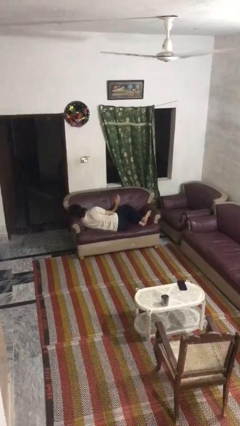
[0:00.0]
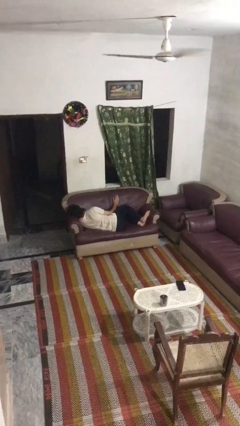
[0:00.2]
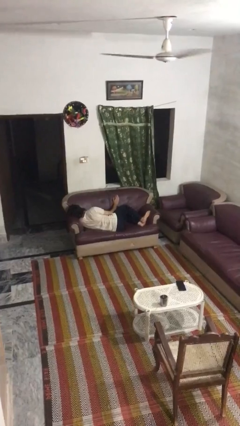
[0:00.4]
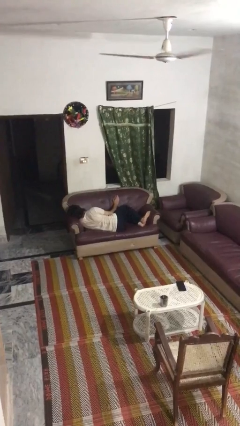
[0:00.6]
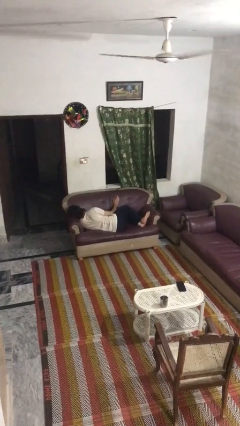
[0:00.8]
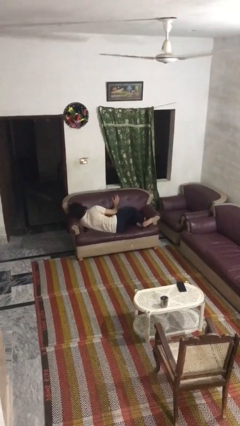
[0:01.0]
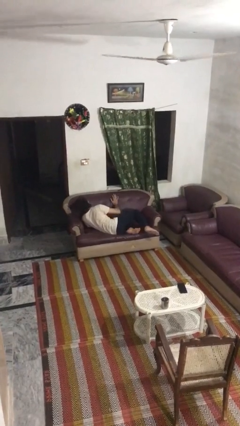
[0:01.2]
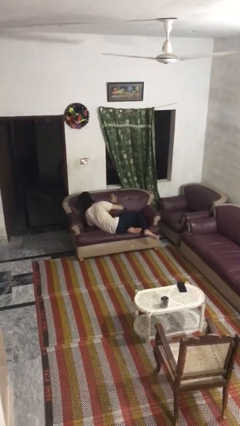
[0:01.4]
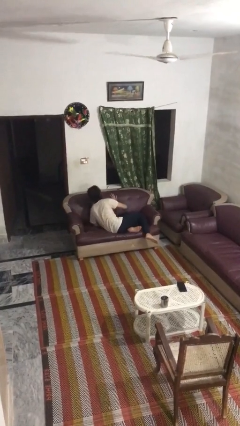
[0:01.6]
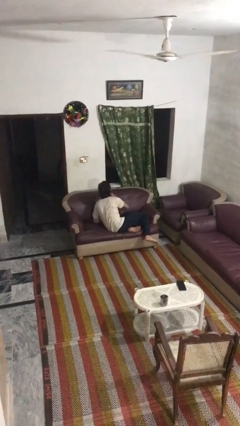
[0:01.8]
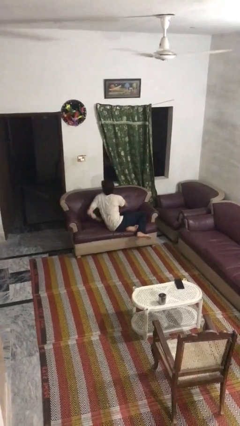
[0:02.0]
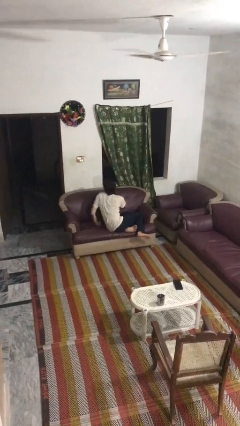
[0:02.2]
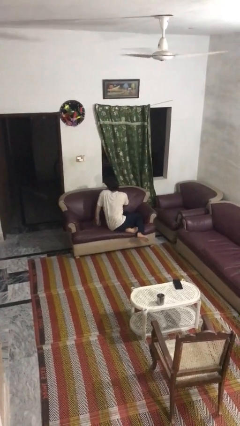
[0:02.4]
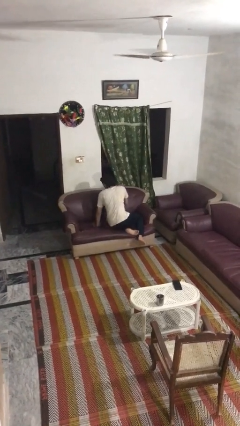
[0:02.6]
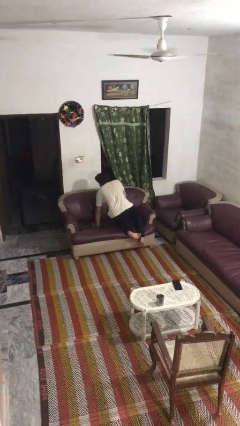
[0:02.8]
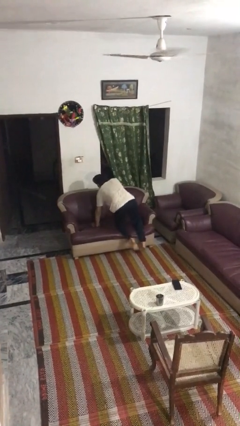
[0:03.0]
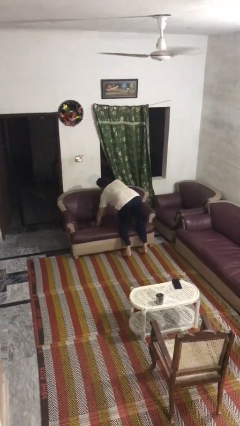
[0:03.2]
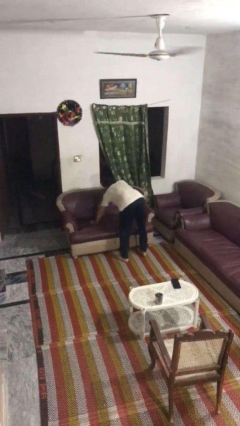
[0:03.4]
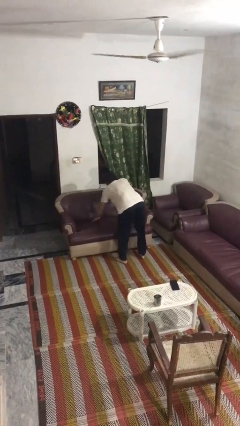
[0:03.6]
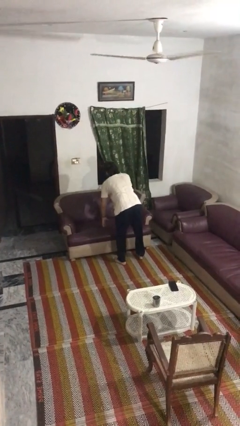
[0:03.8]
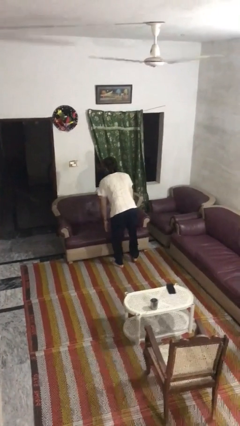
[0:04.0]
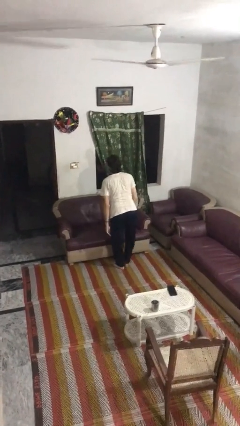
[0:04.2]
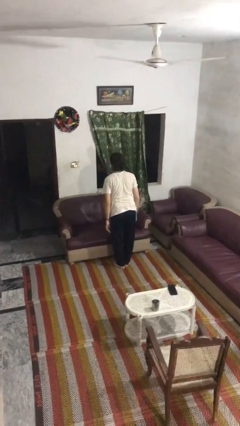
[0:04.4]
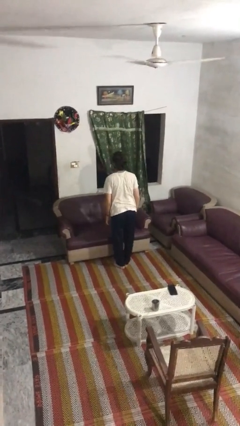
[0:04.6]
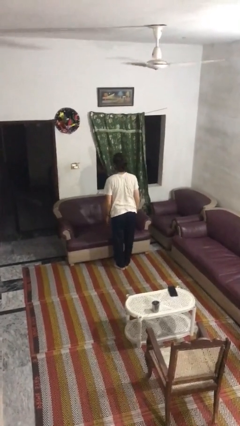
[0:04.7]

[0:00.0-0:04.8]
person stands up

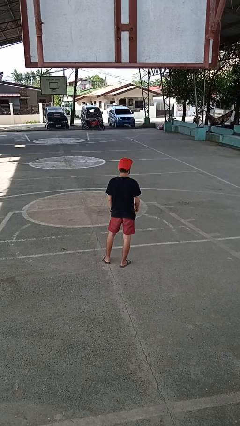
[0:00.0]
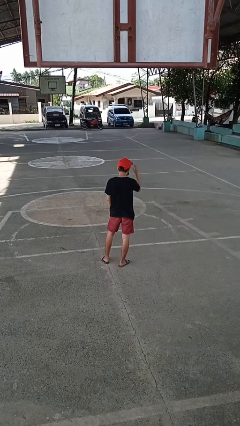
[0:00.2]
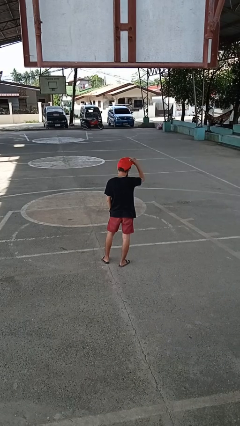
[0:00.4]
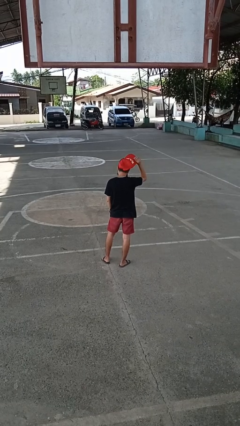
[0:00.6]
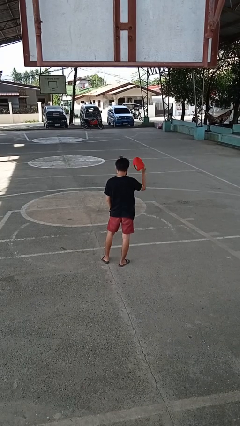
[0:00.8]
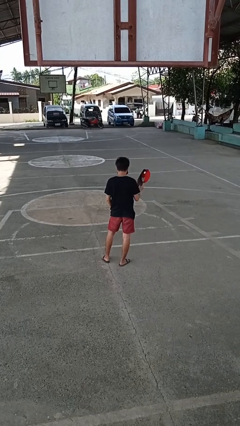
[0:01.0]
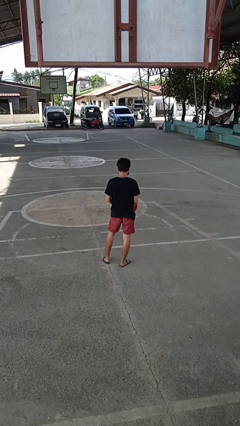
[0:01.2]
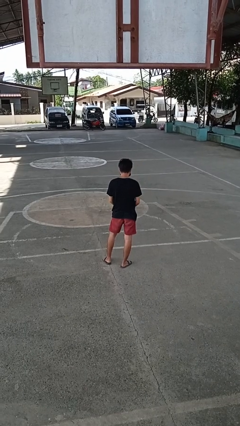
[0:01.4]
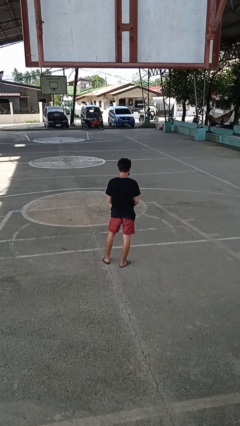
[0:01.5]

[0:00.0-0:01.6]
person takes off hat

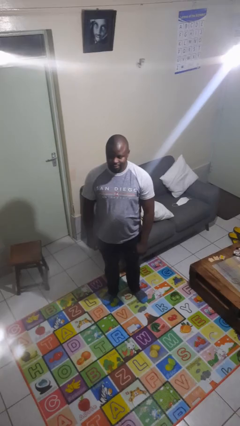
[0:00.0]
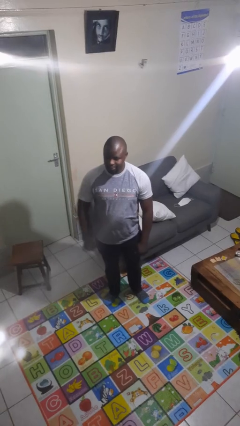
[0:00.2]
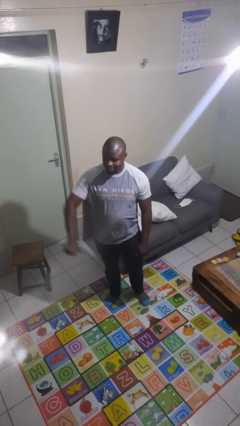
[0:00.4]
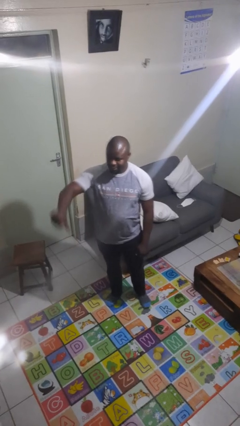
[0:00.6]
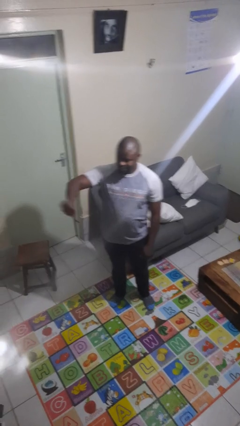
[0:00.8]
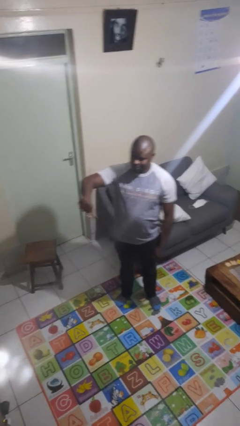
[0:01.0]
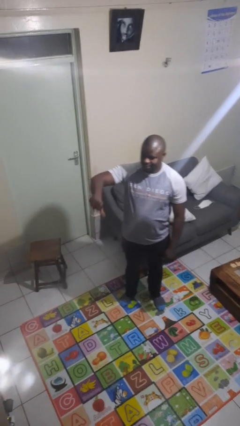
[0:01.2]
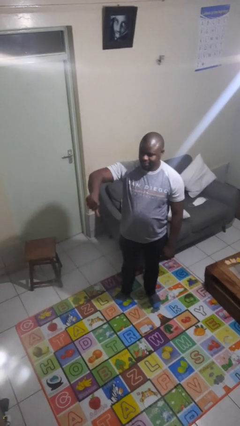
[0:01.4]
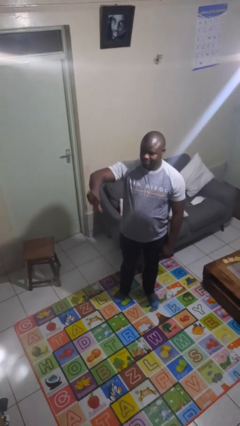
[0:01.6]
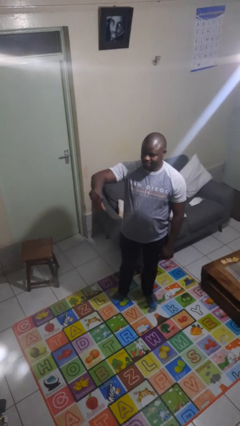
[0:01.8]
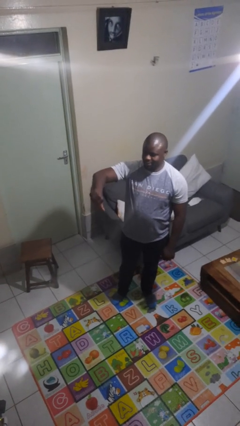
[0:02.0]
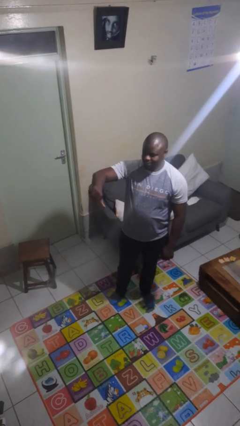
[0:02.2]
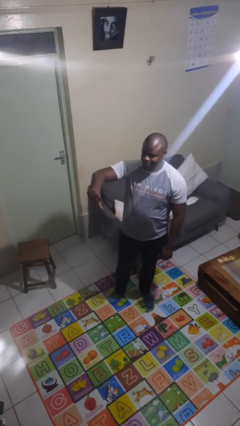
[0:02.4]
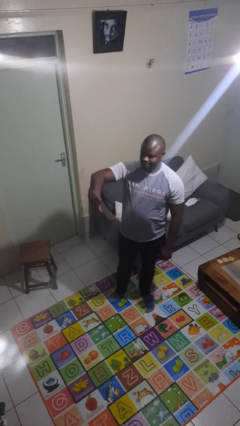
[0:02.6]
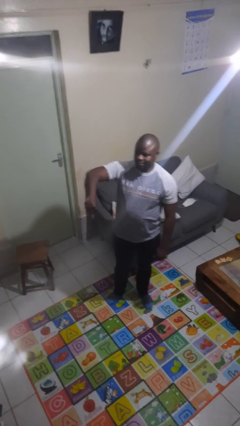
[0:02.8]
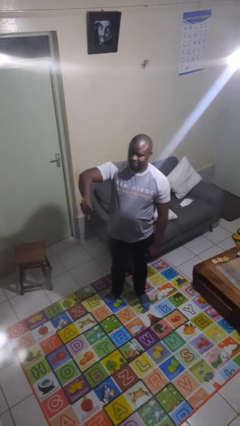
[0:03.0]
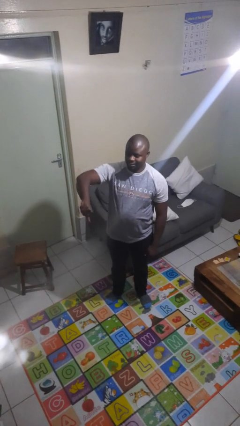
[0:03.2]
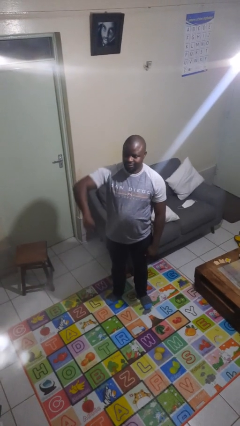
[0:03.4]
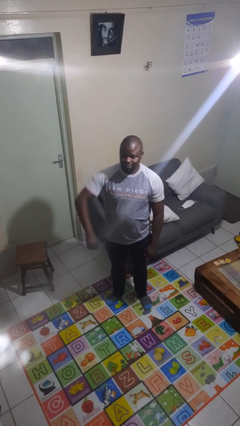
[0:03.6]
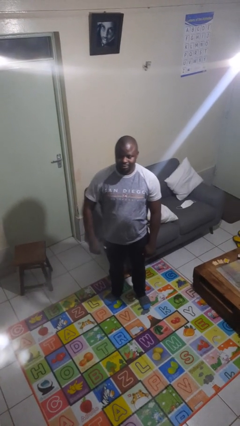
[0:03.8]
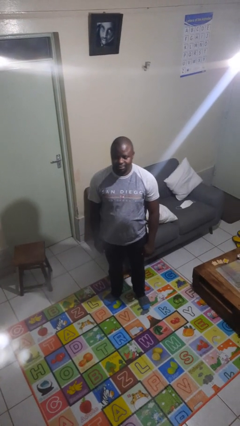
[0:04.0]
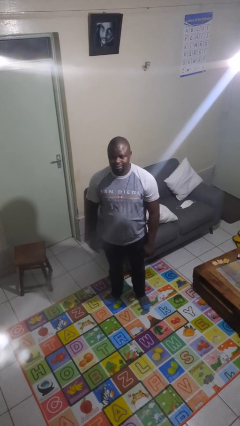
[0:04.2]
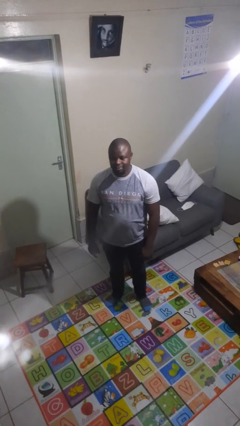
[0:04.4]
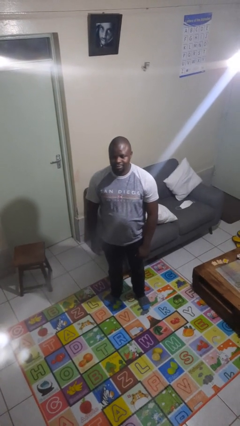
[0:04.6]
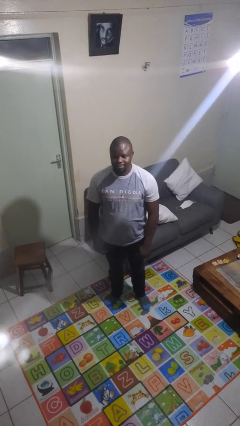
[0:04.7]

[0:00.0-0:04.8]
person gestures thumbs down

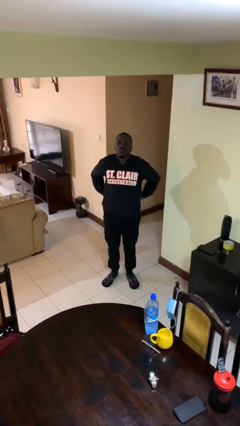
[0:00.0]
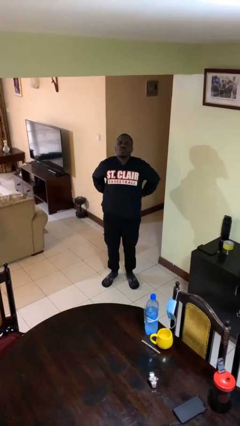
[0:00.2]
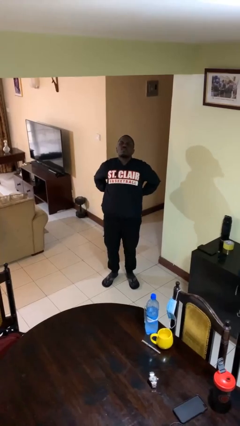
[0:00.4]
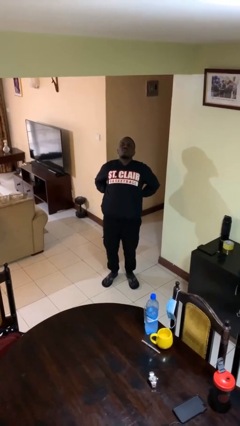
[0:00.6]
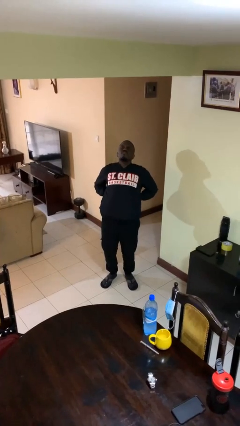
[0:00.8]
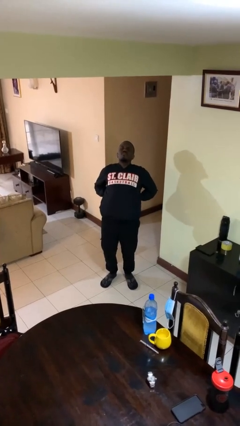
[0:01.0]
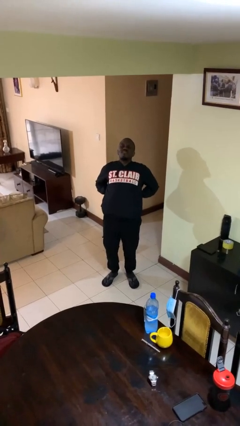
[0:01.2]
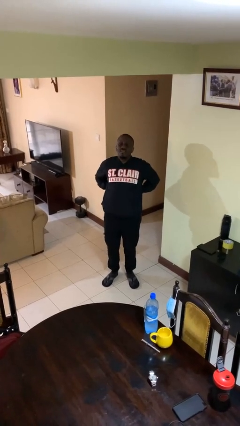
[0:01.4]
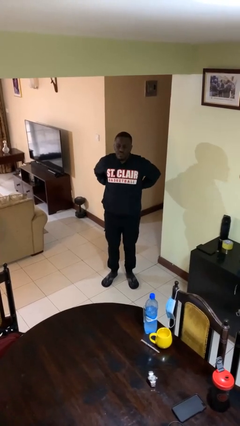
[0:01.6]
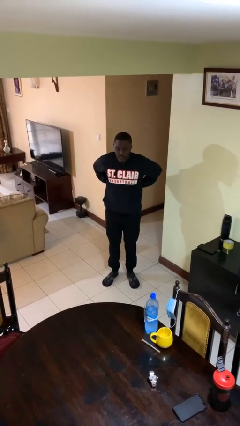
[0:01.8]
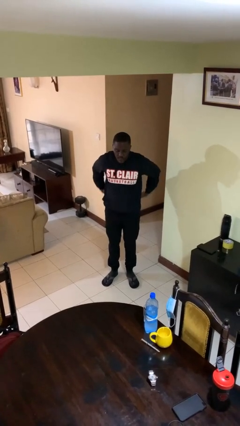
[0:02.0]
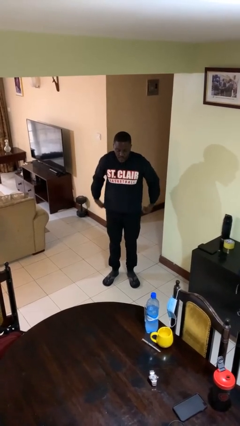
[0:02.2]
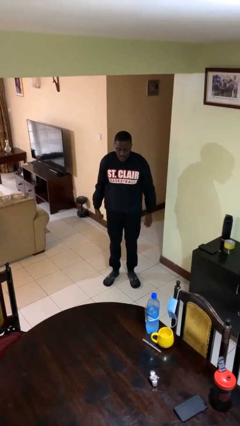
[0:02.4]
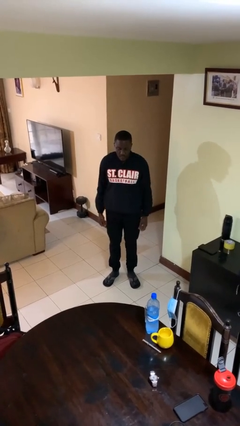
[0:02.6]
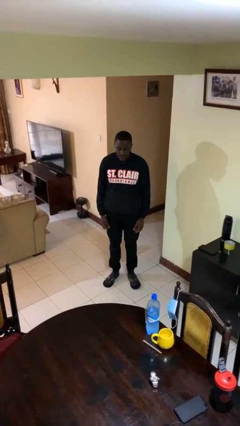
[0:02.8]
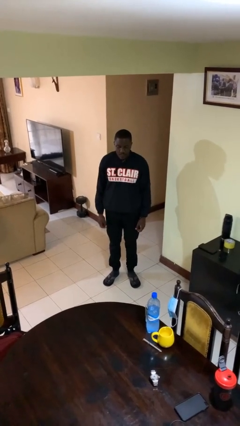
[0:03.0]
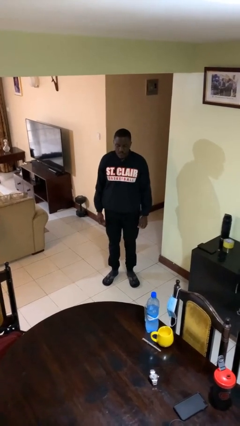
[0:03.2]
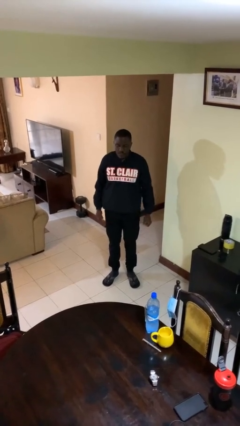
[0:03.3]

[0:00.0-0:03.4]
person stretches back

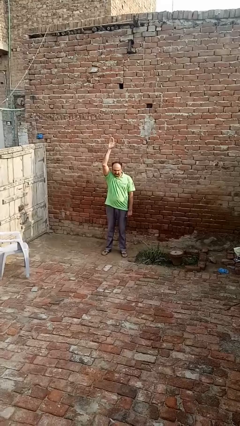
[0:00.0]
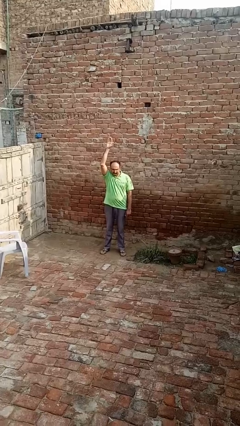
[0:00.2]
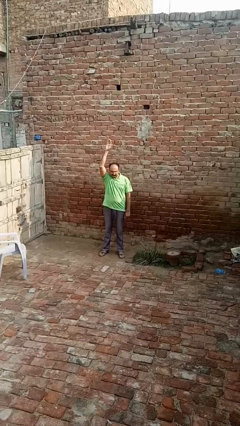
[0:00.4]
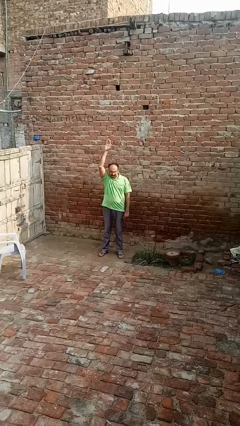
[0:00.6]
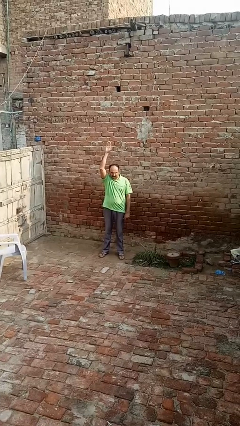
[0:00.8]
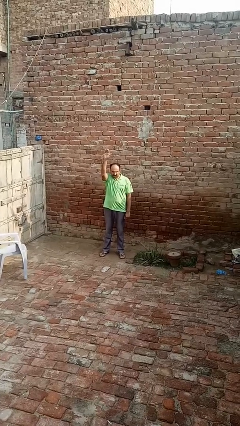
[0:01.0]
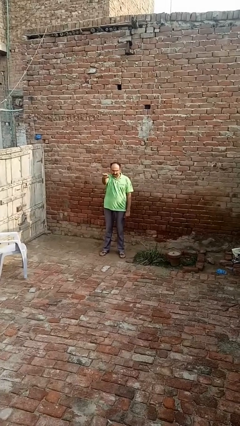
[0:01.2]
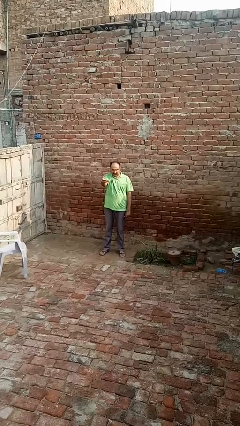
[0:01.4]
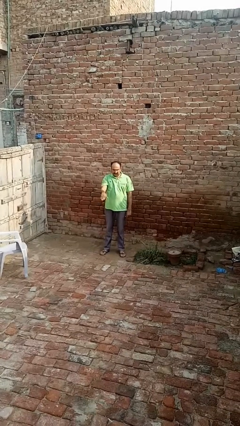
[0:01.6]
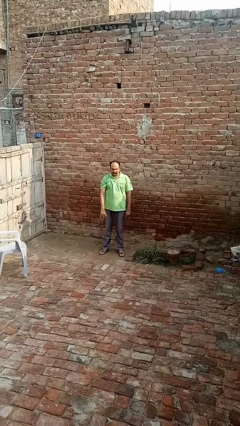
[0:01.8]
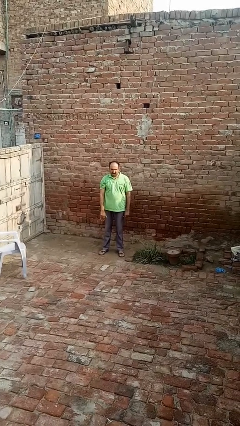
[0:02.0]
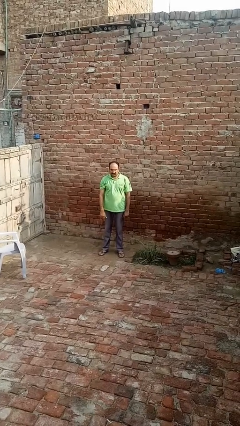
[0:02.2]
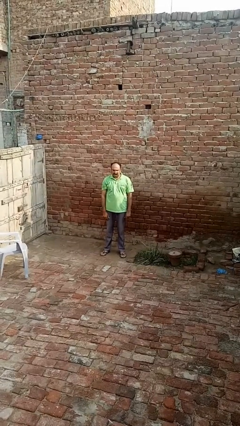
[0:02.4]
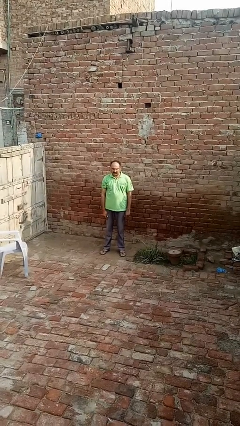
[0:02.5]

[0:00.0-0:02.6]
person gestures swipe down

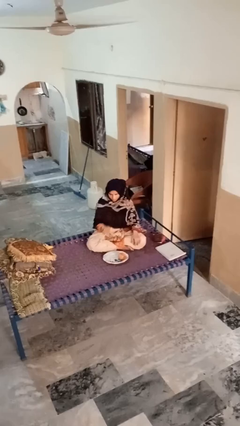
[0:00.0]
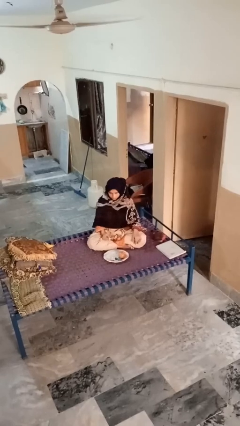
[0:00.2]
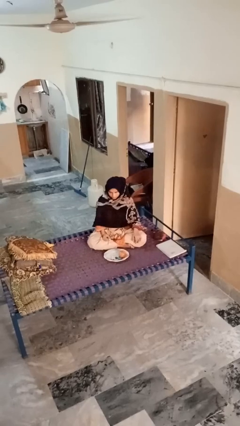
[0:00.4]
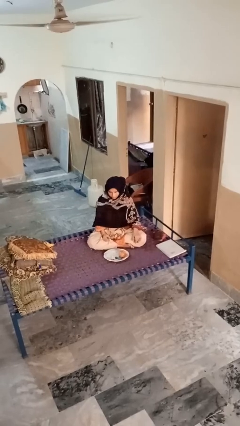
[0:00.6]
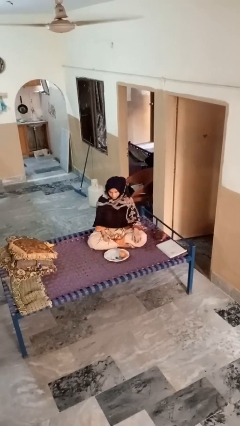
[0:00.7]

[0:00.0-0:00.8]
person eats apple
